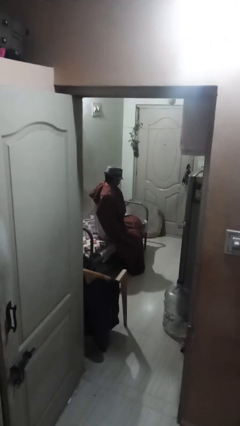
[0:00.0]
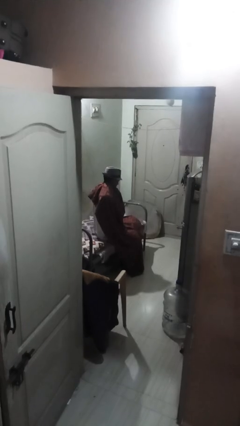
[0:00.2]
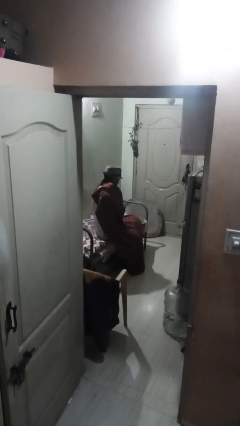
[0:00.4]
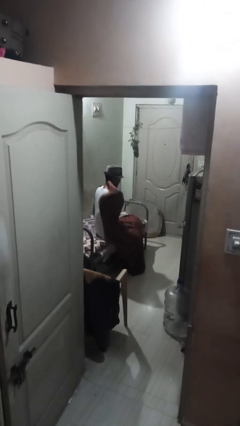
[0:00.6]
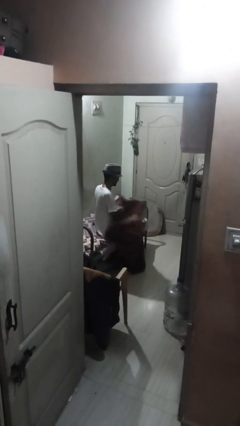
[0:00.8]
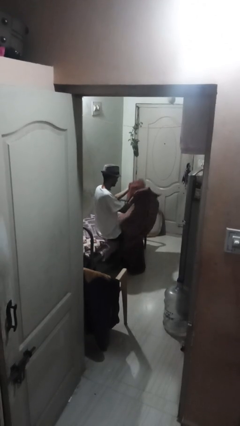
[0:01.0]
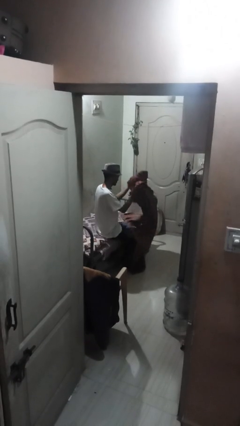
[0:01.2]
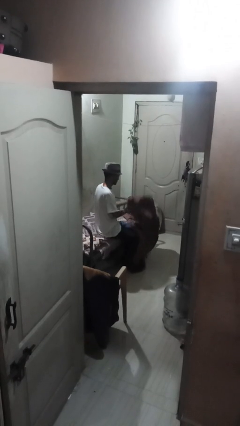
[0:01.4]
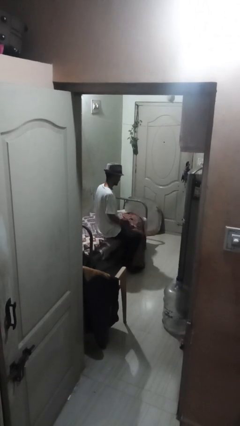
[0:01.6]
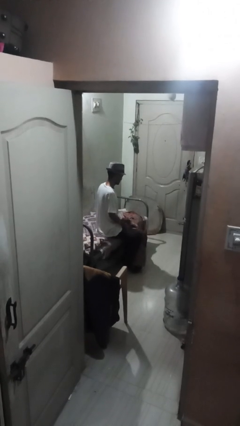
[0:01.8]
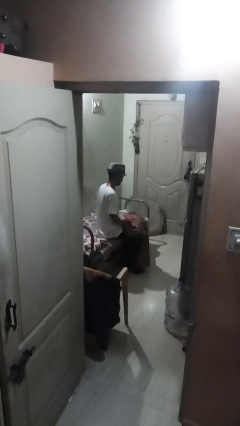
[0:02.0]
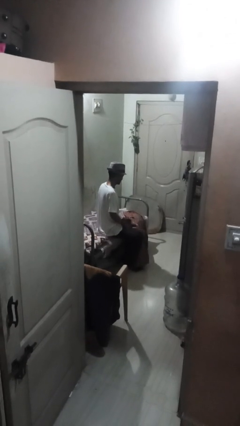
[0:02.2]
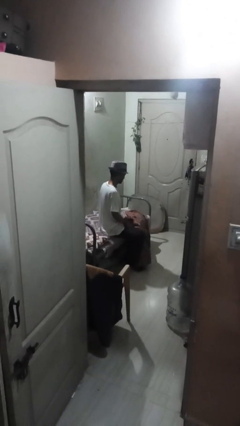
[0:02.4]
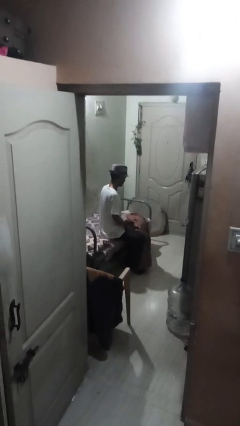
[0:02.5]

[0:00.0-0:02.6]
person uncovers with blanket

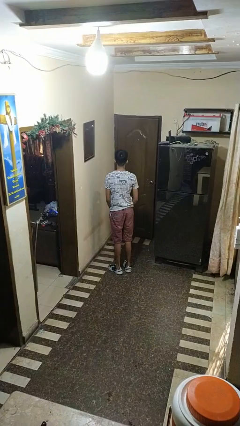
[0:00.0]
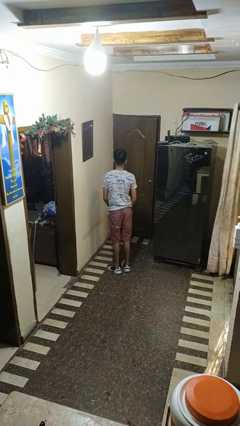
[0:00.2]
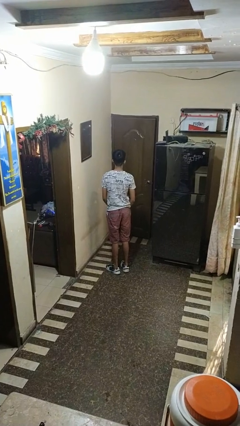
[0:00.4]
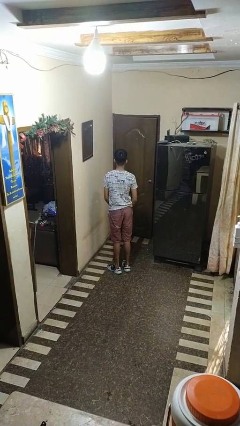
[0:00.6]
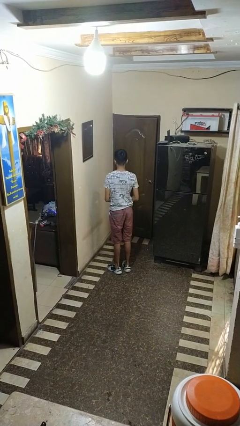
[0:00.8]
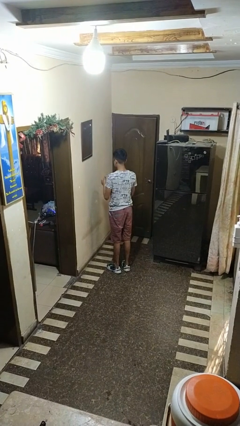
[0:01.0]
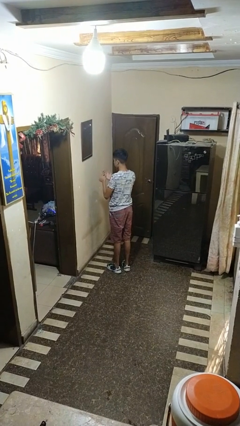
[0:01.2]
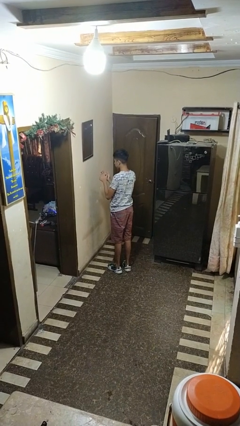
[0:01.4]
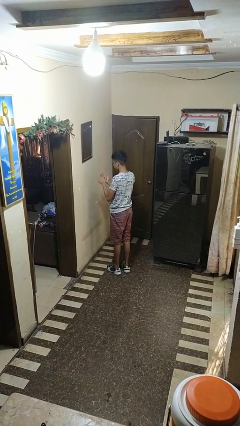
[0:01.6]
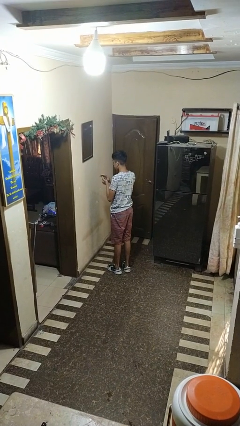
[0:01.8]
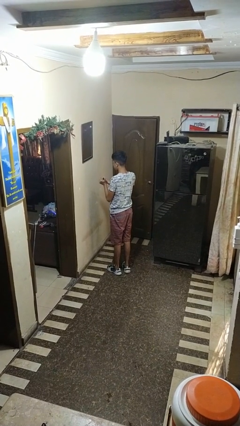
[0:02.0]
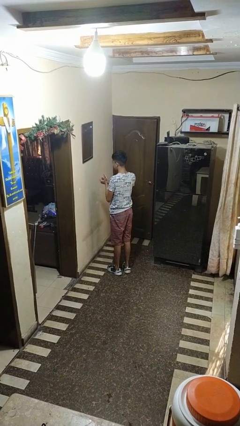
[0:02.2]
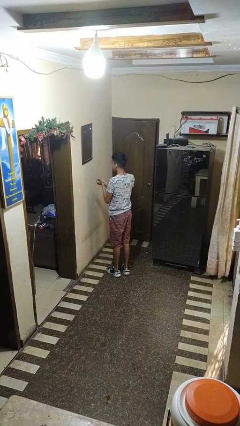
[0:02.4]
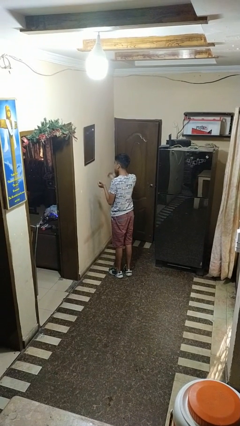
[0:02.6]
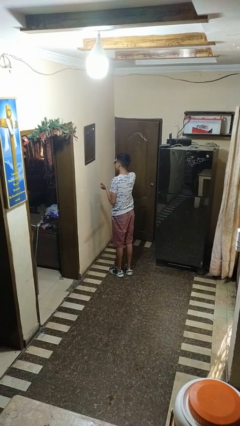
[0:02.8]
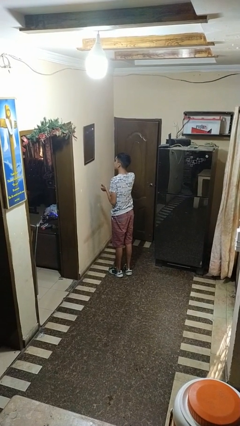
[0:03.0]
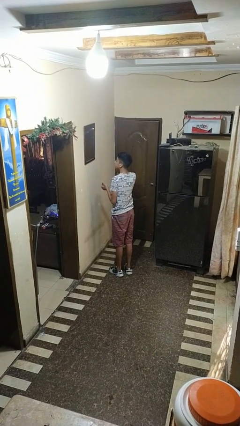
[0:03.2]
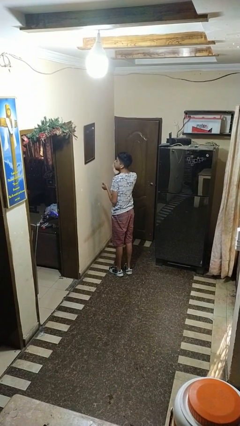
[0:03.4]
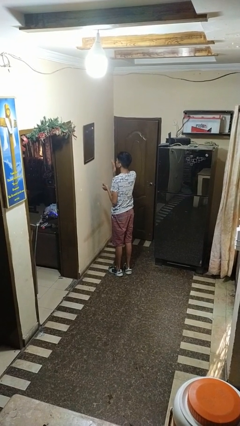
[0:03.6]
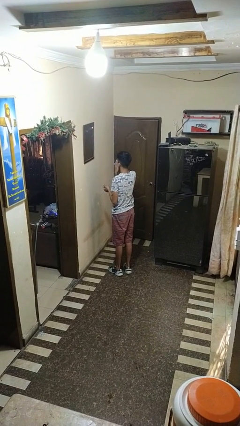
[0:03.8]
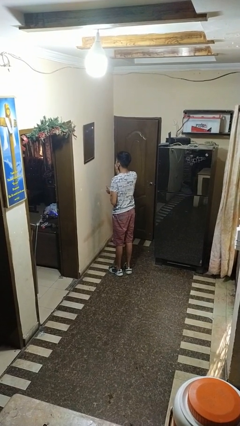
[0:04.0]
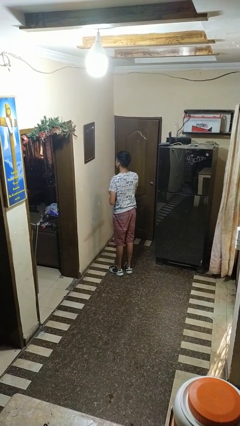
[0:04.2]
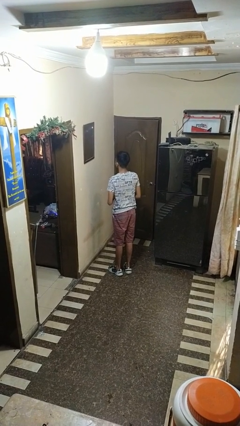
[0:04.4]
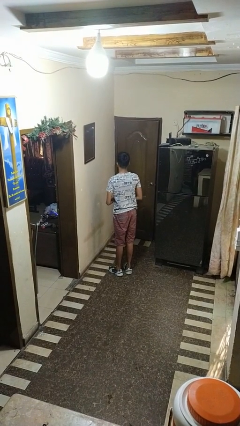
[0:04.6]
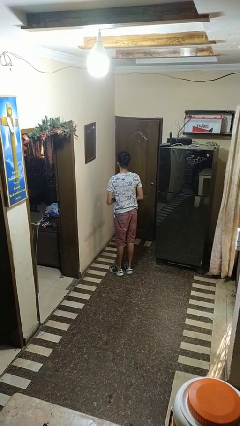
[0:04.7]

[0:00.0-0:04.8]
person applies foundation makeup

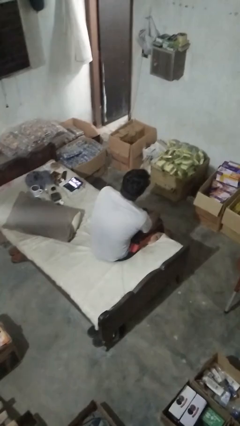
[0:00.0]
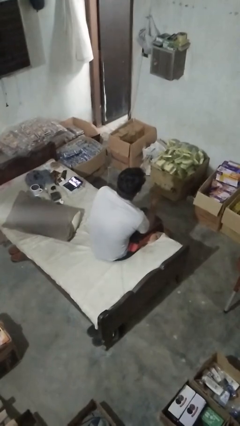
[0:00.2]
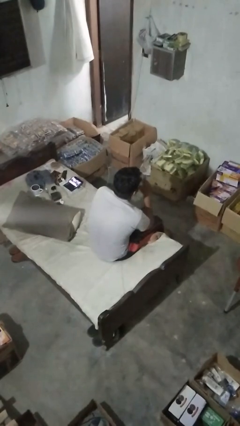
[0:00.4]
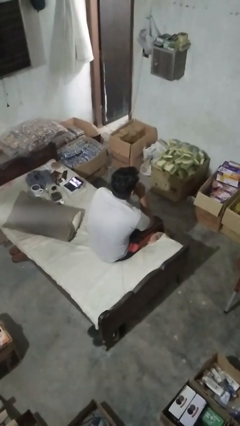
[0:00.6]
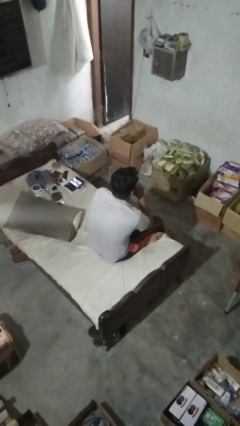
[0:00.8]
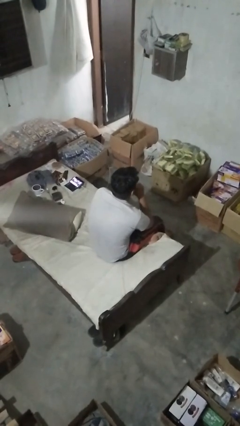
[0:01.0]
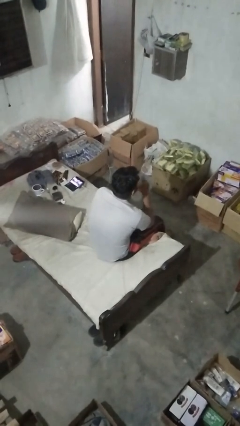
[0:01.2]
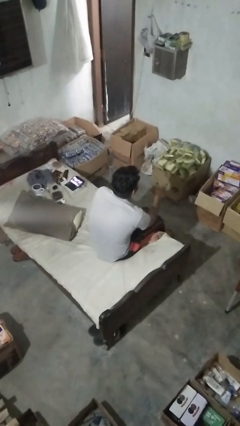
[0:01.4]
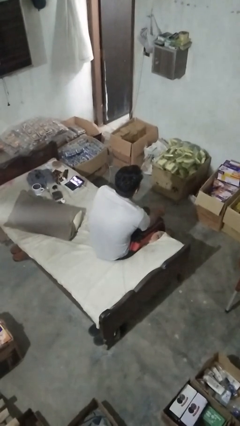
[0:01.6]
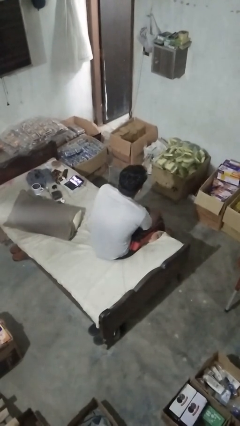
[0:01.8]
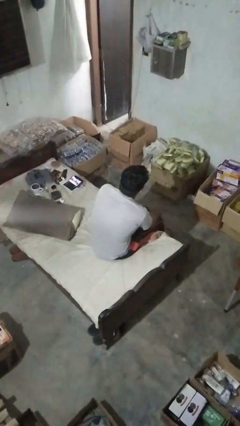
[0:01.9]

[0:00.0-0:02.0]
person gestures be quiet

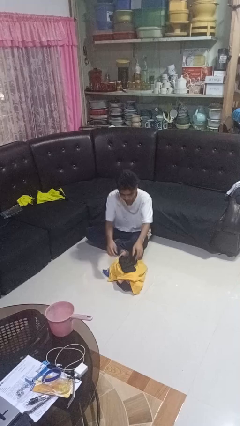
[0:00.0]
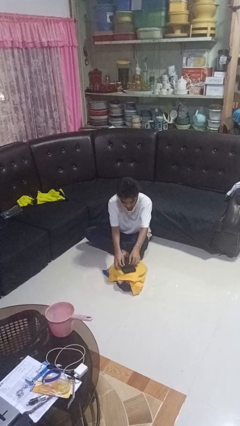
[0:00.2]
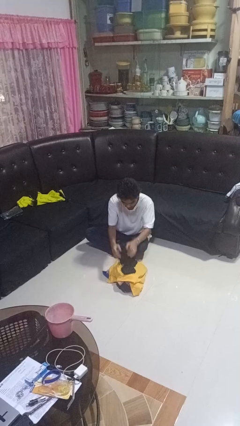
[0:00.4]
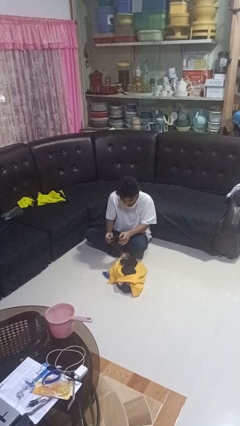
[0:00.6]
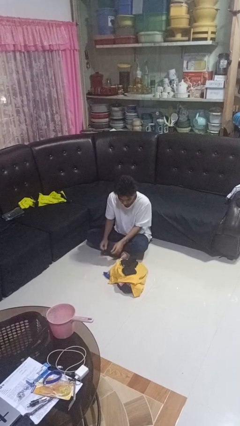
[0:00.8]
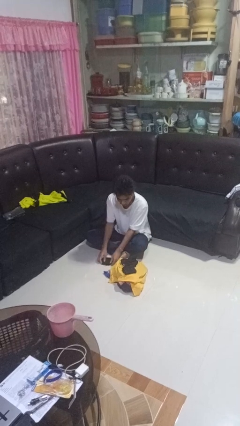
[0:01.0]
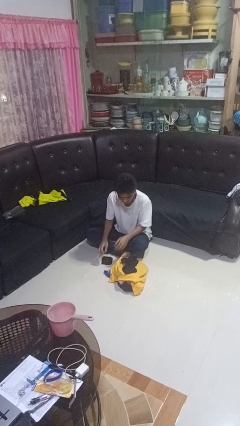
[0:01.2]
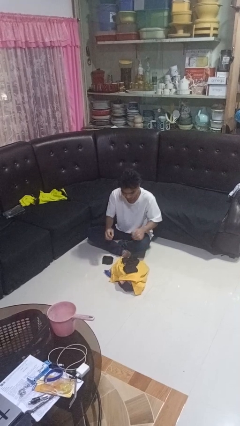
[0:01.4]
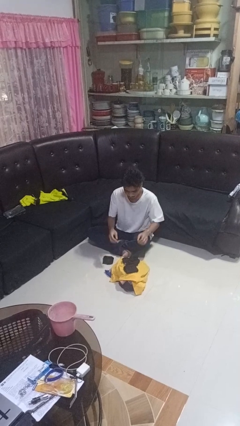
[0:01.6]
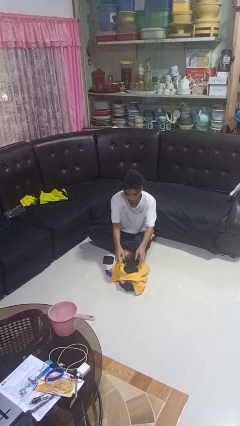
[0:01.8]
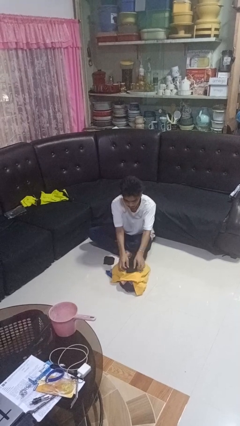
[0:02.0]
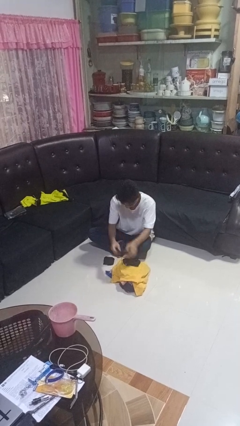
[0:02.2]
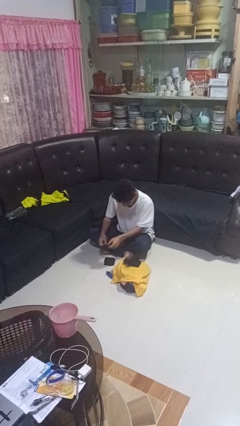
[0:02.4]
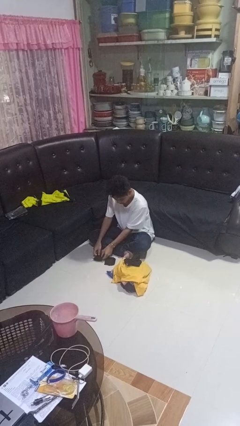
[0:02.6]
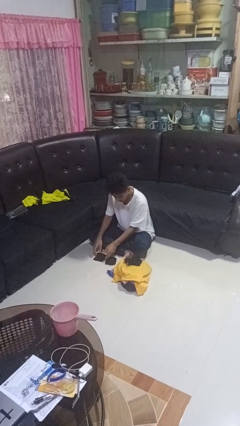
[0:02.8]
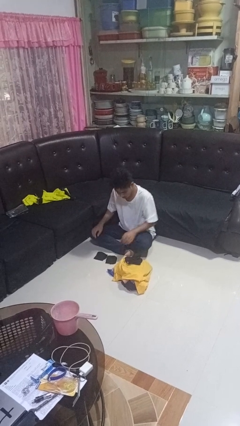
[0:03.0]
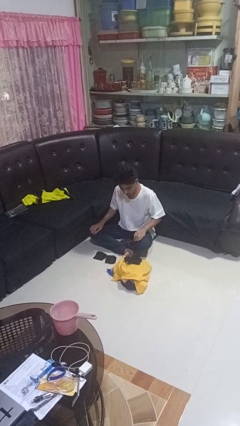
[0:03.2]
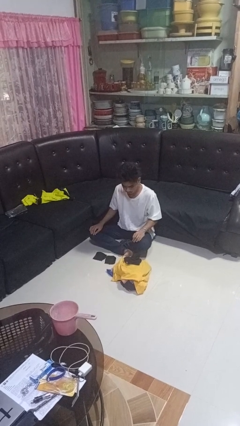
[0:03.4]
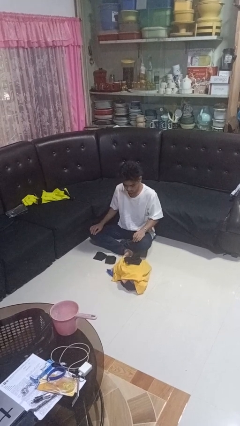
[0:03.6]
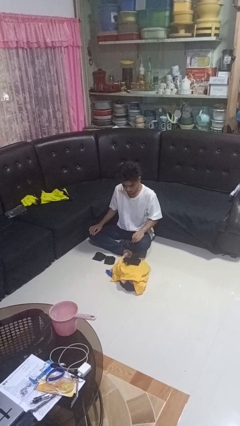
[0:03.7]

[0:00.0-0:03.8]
person folds socks

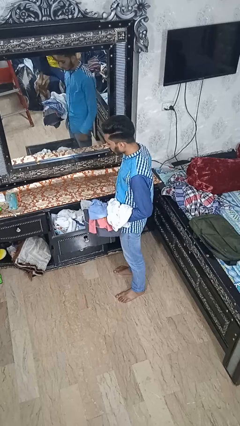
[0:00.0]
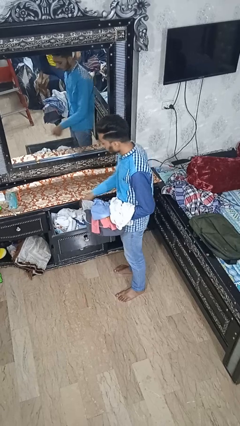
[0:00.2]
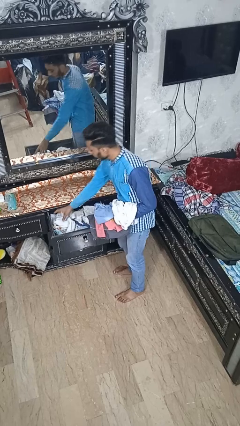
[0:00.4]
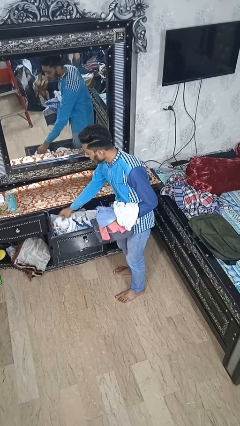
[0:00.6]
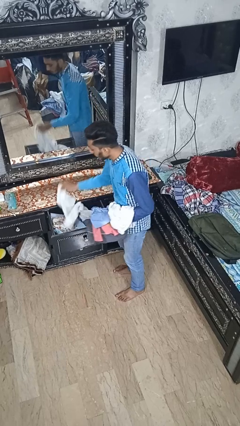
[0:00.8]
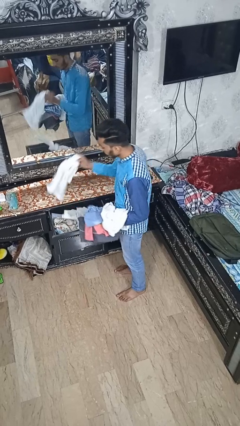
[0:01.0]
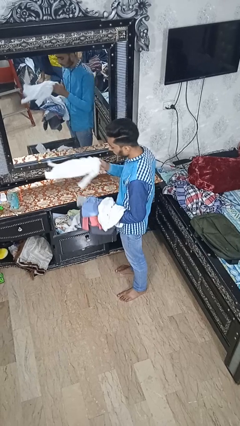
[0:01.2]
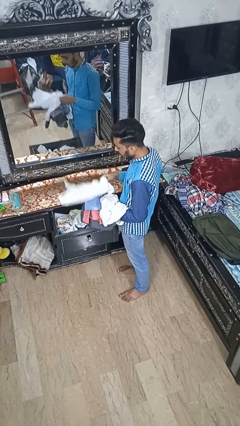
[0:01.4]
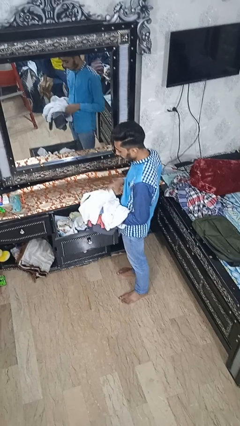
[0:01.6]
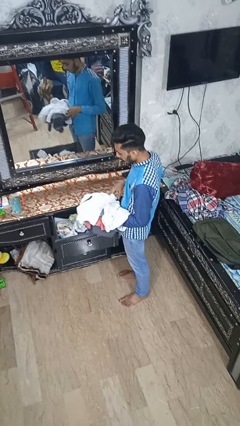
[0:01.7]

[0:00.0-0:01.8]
person takes clothes from dresser

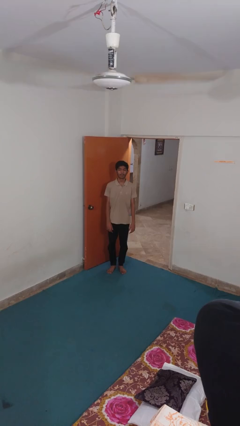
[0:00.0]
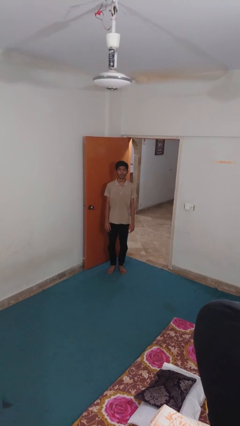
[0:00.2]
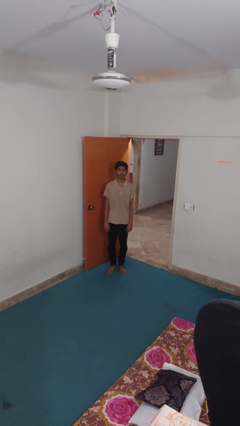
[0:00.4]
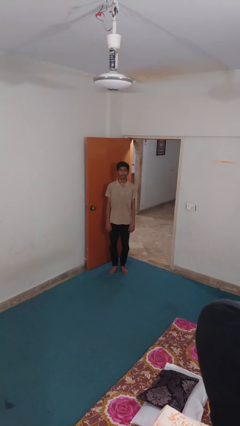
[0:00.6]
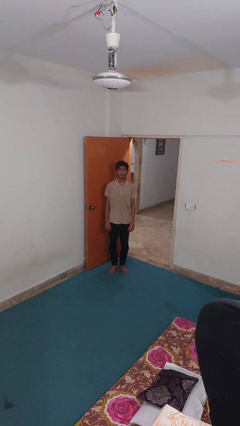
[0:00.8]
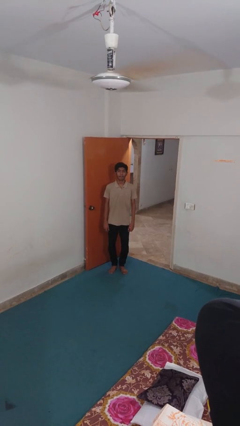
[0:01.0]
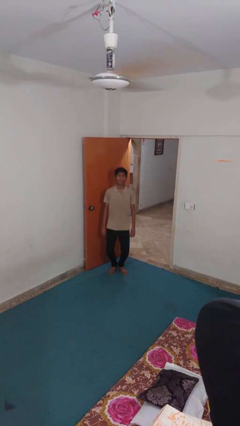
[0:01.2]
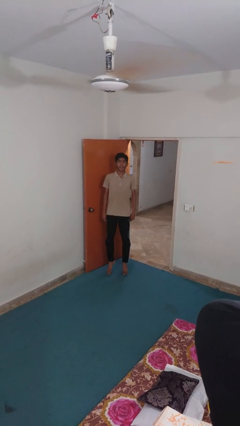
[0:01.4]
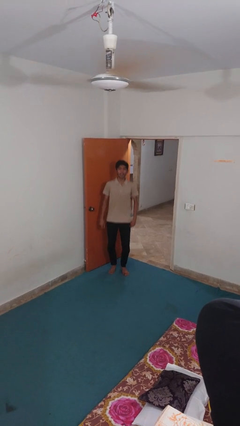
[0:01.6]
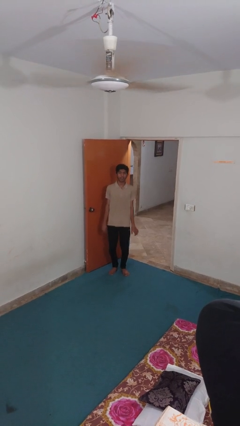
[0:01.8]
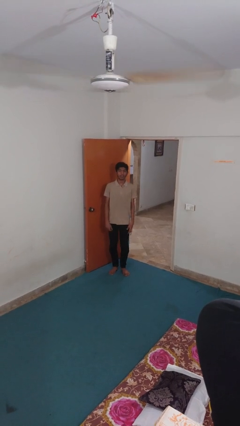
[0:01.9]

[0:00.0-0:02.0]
person jumps
